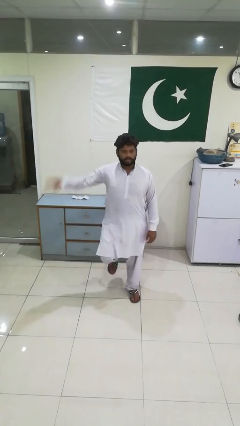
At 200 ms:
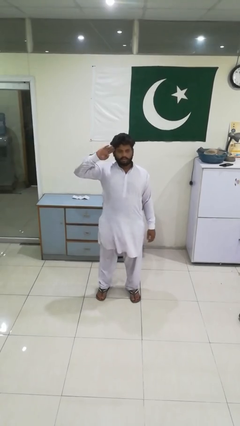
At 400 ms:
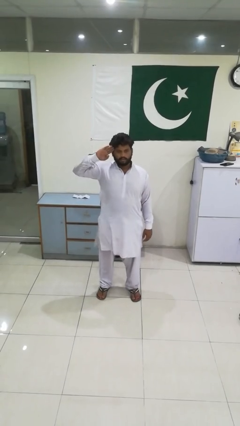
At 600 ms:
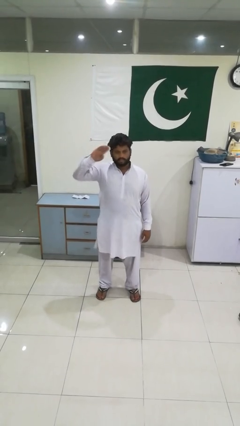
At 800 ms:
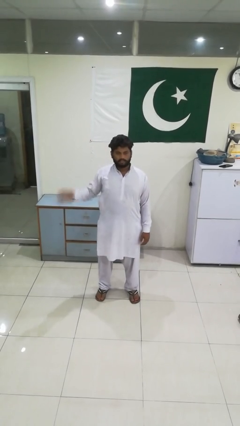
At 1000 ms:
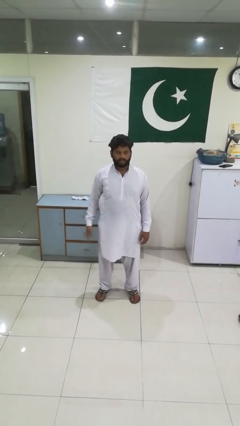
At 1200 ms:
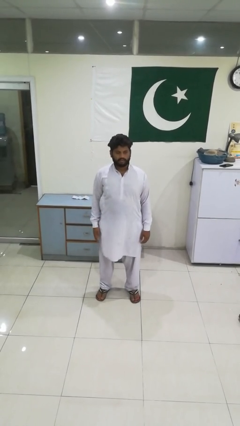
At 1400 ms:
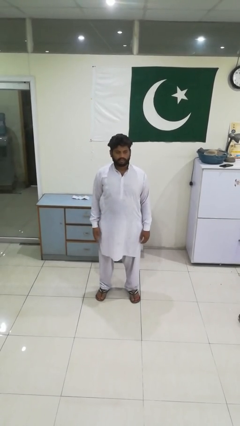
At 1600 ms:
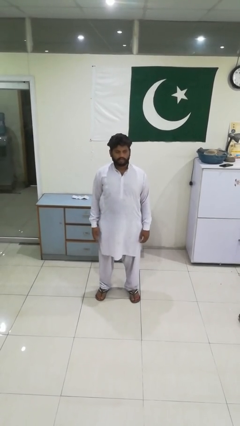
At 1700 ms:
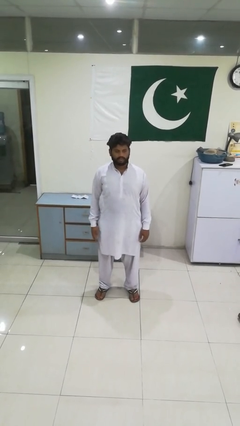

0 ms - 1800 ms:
person salutes

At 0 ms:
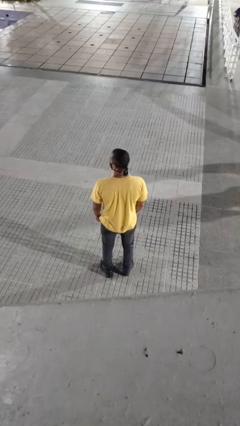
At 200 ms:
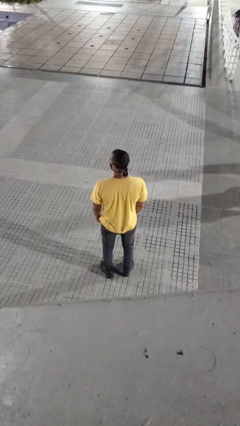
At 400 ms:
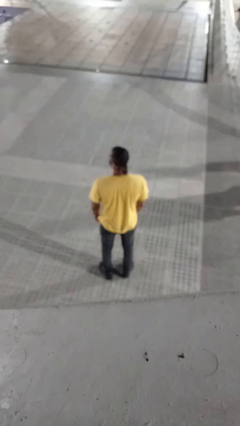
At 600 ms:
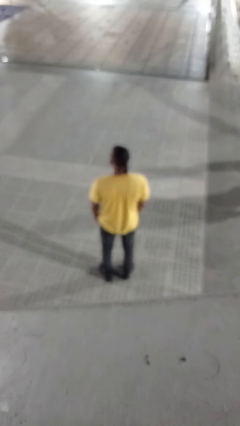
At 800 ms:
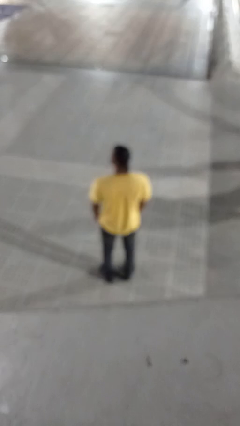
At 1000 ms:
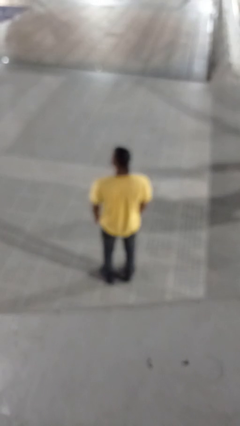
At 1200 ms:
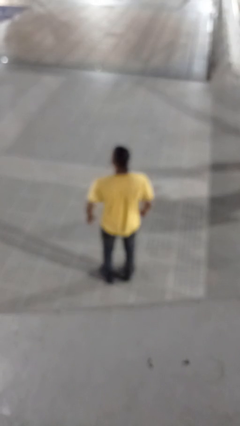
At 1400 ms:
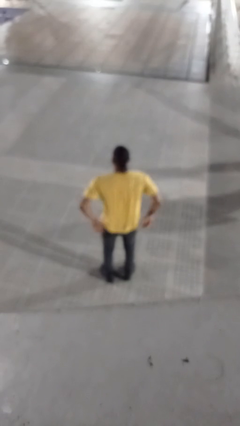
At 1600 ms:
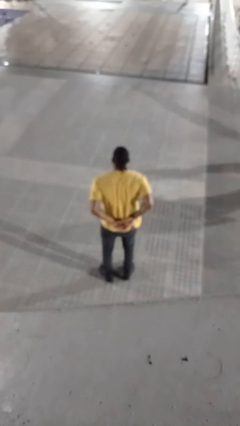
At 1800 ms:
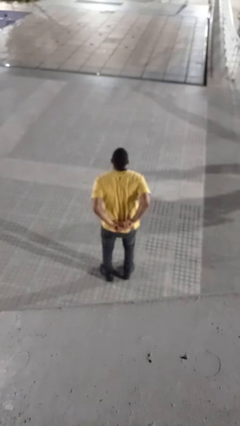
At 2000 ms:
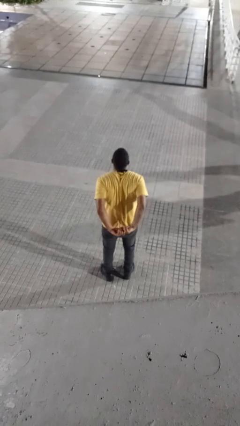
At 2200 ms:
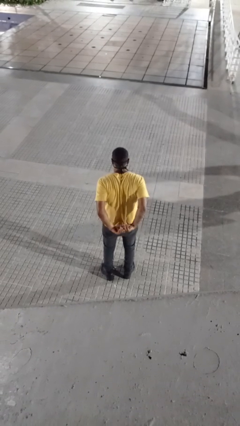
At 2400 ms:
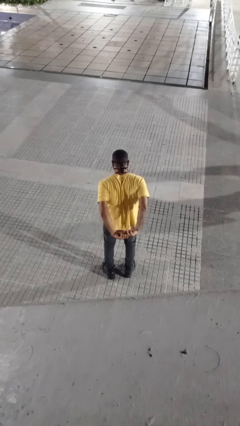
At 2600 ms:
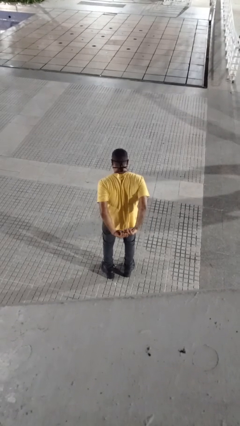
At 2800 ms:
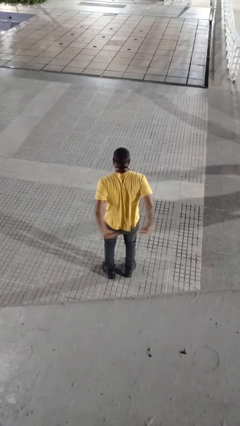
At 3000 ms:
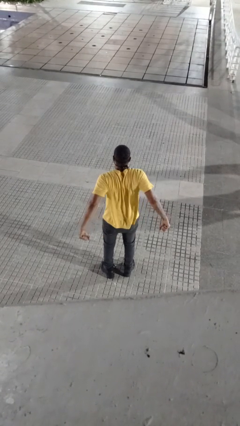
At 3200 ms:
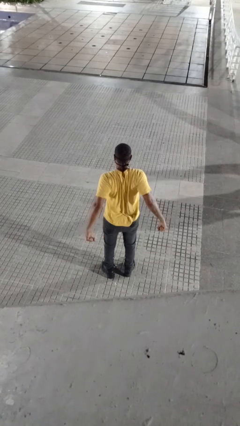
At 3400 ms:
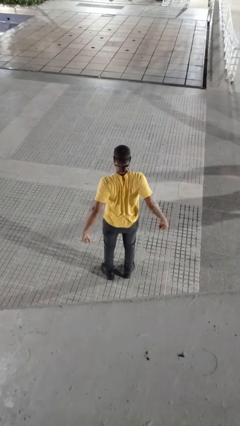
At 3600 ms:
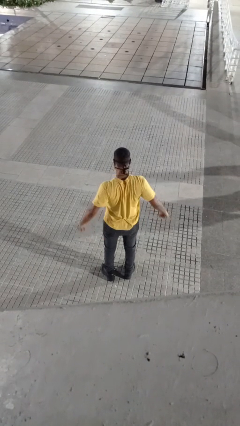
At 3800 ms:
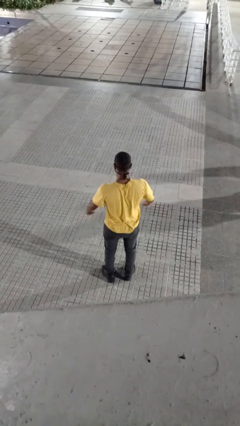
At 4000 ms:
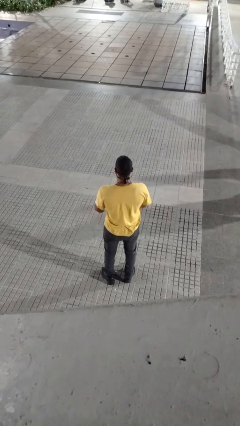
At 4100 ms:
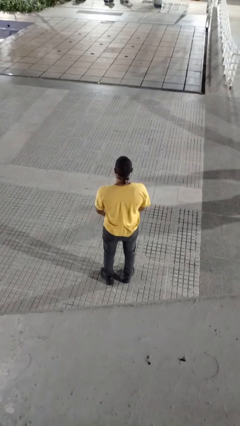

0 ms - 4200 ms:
person stretches back

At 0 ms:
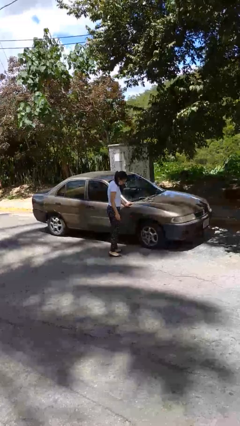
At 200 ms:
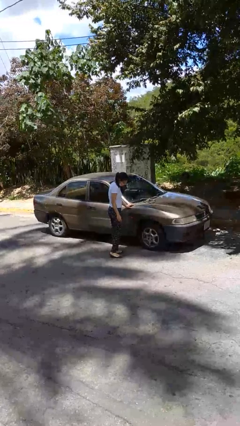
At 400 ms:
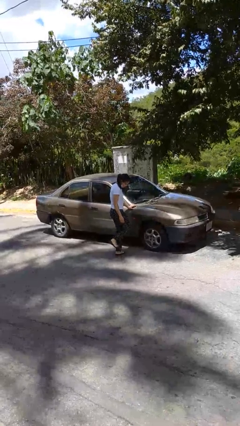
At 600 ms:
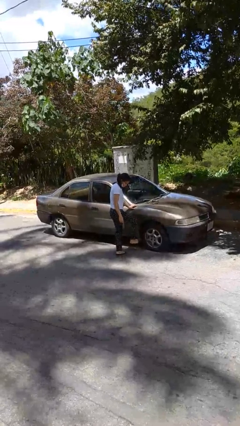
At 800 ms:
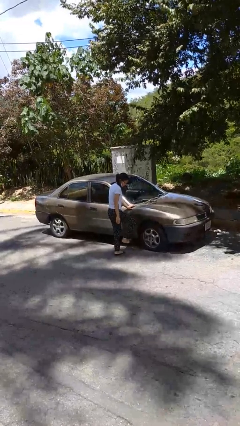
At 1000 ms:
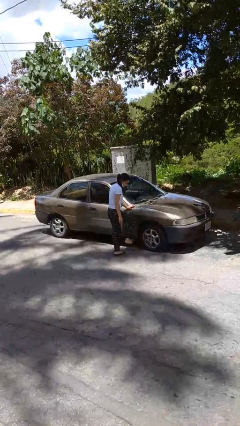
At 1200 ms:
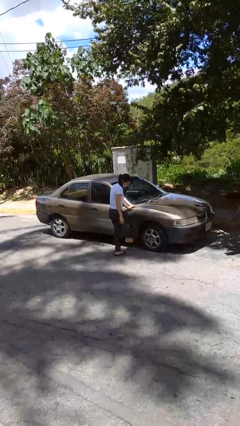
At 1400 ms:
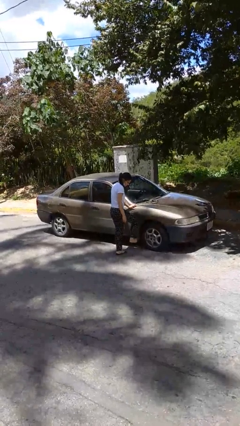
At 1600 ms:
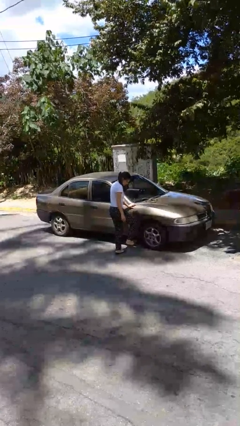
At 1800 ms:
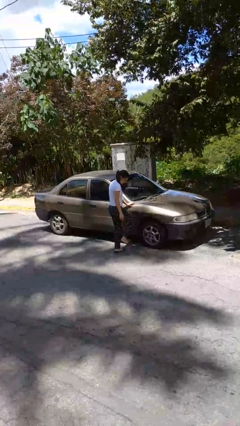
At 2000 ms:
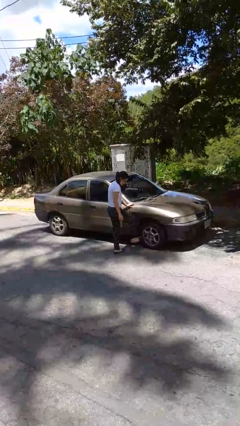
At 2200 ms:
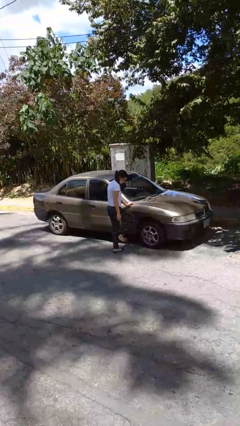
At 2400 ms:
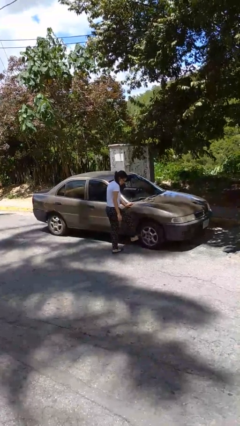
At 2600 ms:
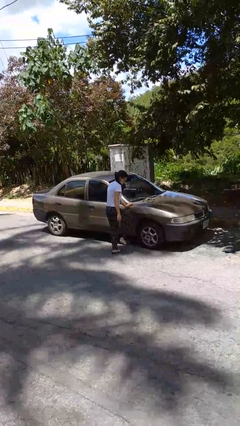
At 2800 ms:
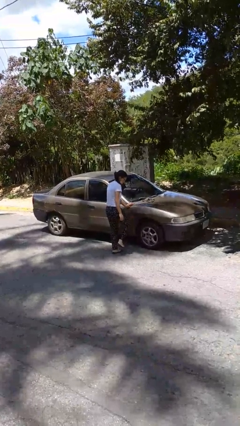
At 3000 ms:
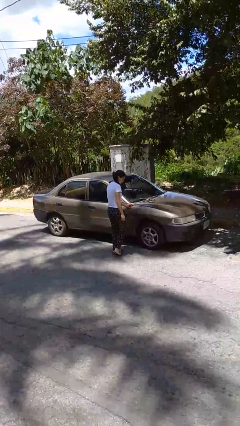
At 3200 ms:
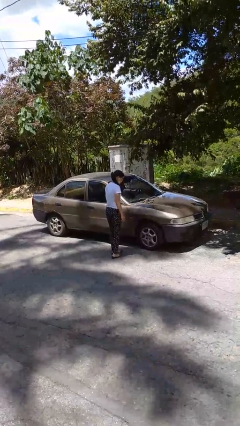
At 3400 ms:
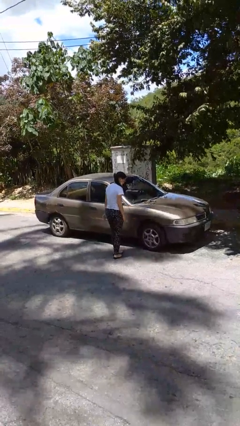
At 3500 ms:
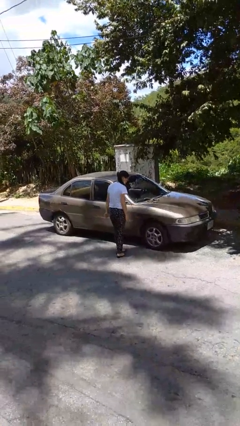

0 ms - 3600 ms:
person kicks car tires

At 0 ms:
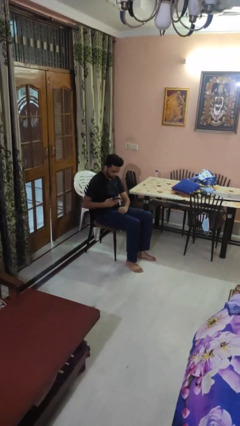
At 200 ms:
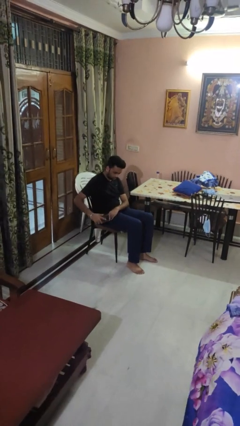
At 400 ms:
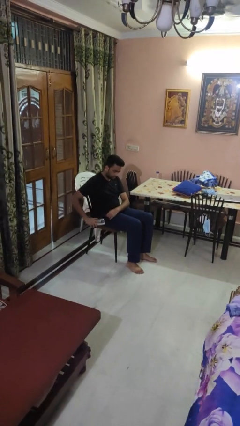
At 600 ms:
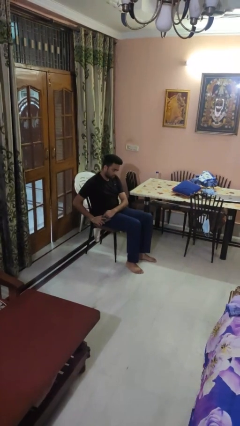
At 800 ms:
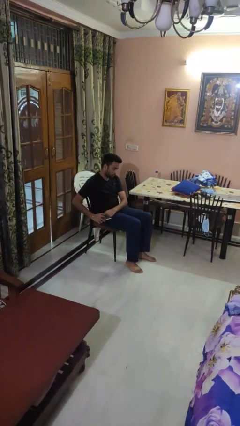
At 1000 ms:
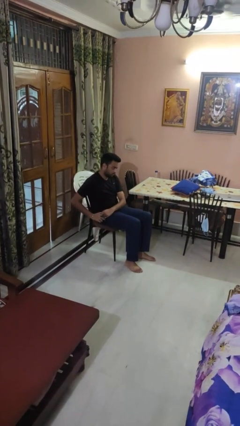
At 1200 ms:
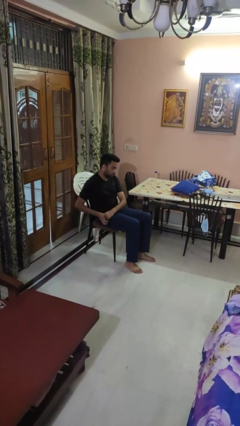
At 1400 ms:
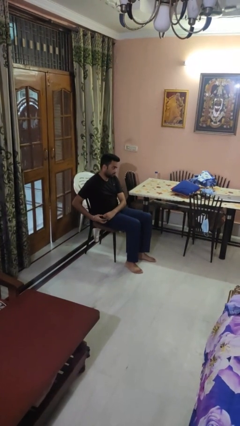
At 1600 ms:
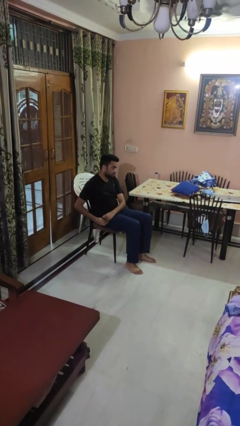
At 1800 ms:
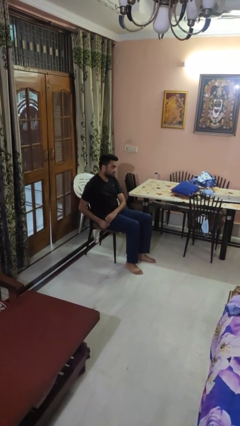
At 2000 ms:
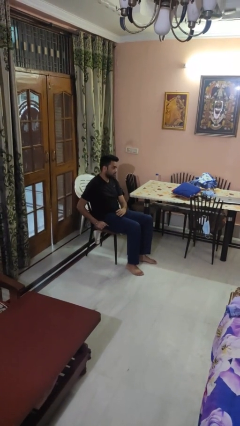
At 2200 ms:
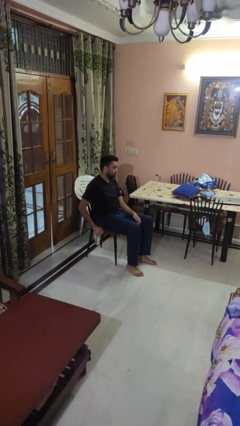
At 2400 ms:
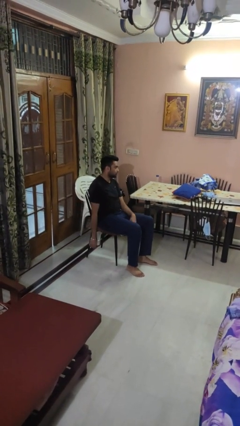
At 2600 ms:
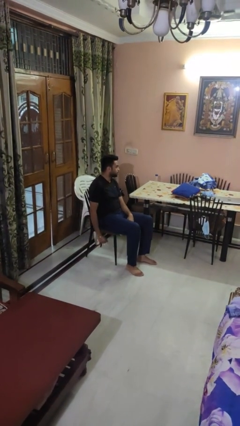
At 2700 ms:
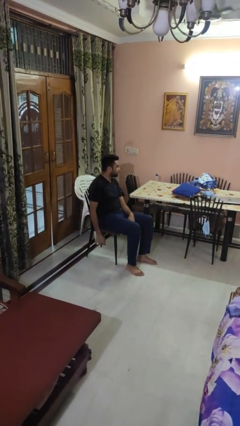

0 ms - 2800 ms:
person puts phone into pocket

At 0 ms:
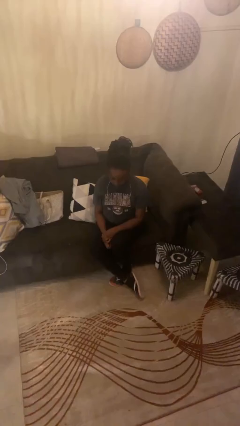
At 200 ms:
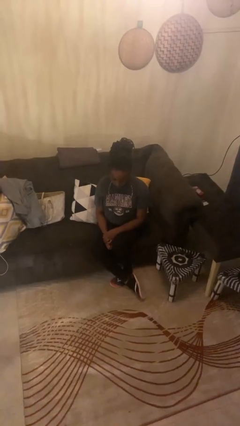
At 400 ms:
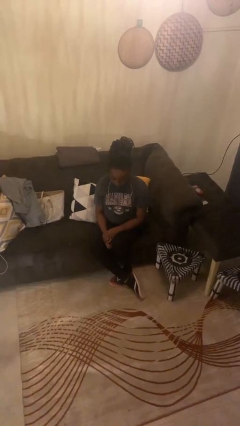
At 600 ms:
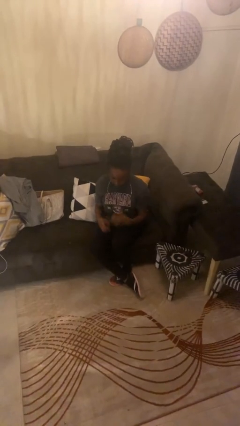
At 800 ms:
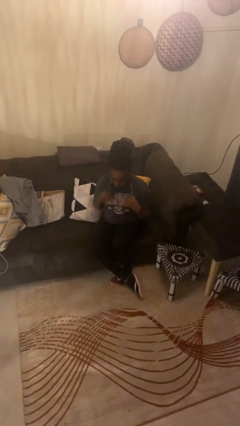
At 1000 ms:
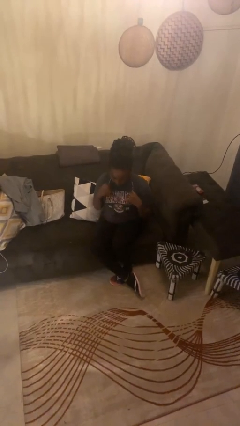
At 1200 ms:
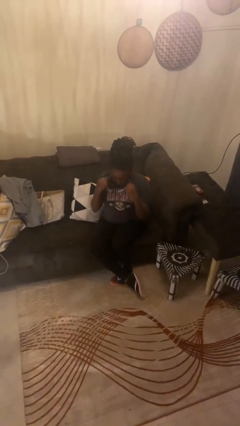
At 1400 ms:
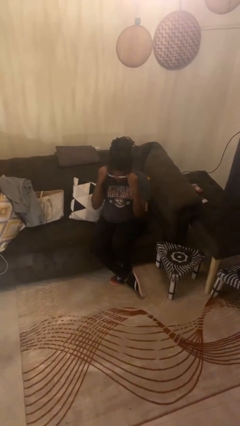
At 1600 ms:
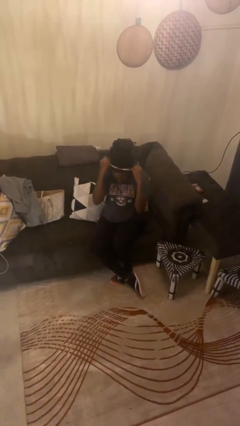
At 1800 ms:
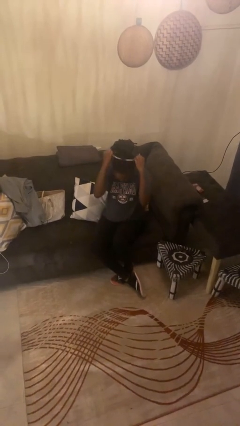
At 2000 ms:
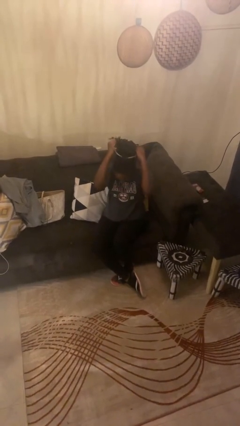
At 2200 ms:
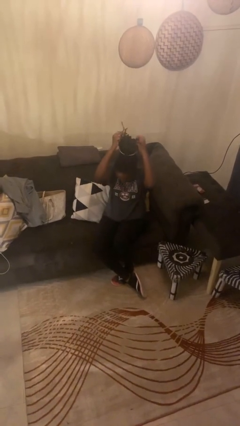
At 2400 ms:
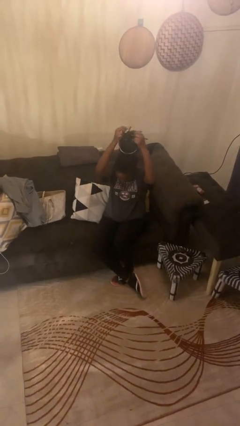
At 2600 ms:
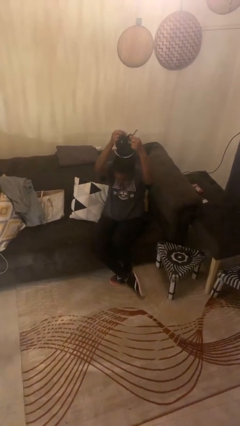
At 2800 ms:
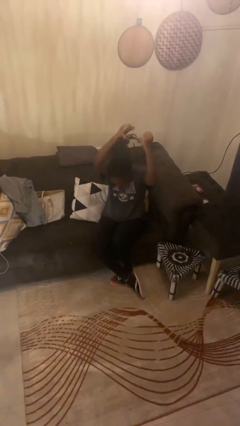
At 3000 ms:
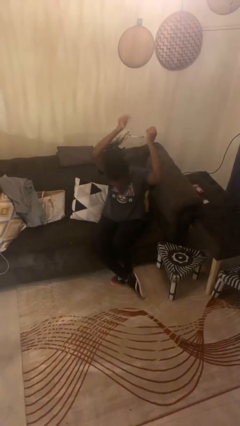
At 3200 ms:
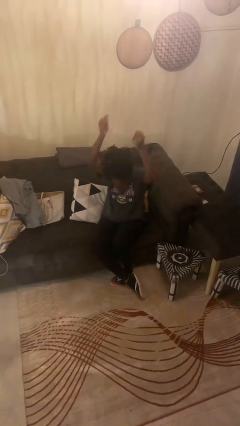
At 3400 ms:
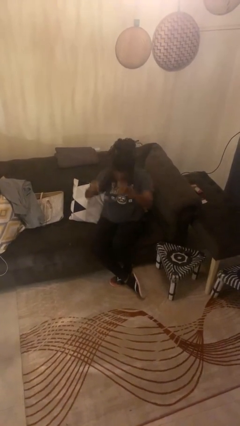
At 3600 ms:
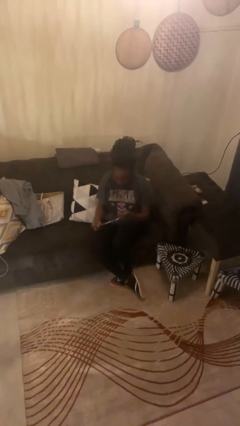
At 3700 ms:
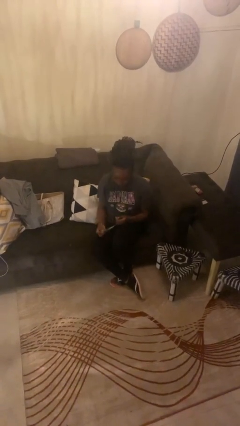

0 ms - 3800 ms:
person takes off necklace

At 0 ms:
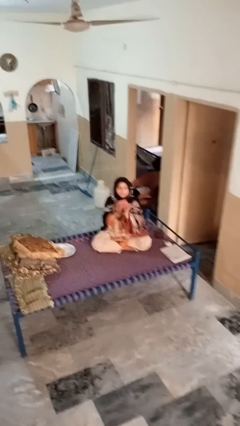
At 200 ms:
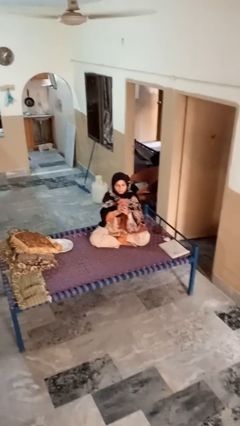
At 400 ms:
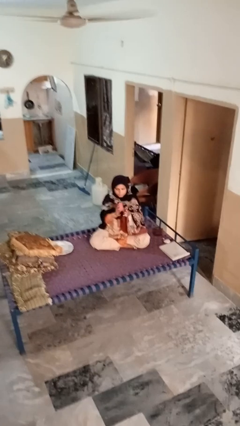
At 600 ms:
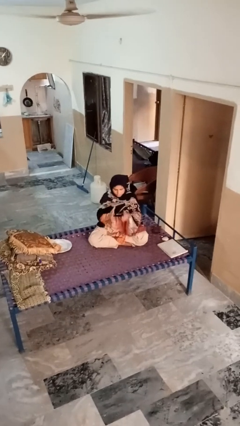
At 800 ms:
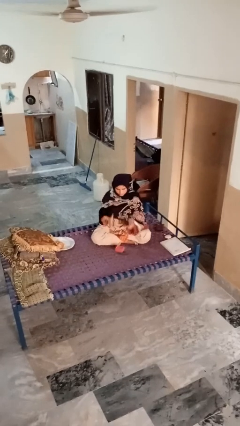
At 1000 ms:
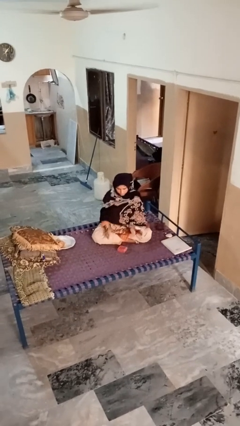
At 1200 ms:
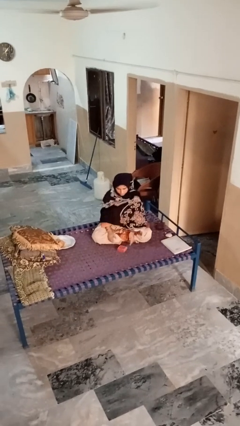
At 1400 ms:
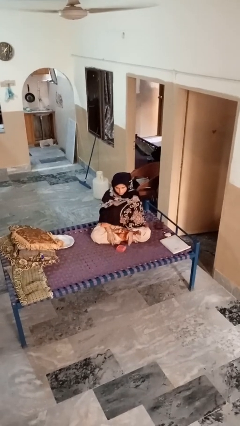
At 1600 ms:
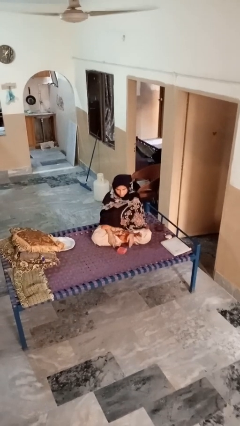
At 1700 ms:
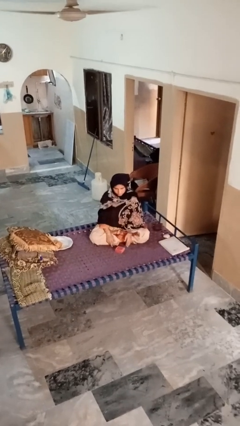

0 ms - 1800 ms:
person catches dropped object
